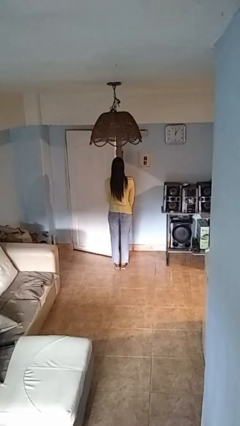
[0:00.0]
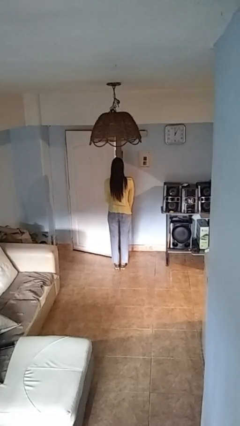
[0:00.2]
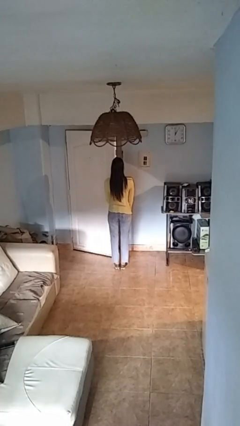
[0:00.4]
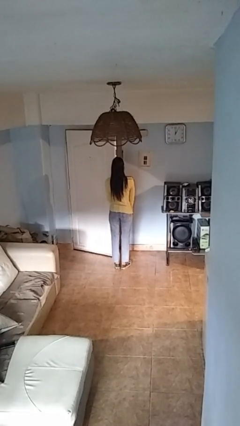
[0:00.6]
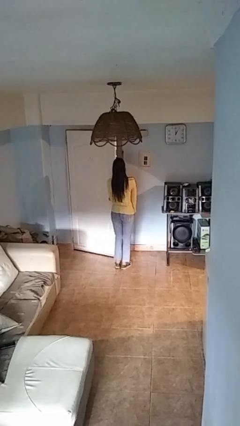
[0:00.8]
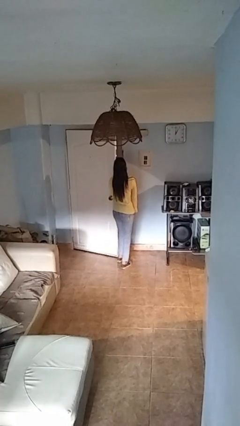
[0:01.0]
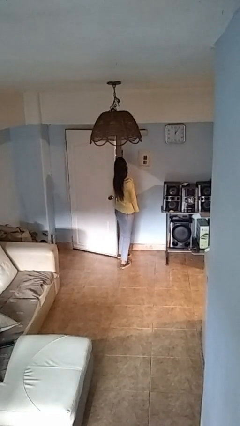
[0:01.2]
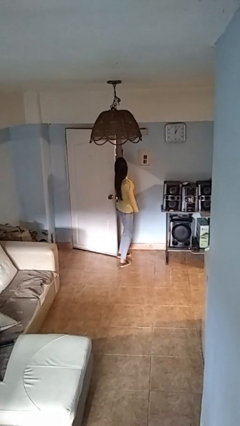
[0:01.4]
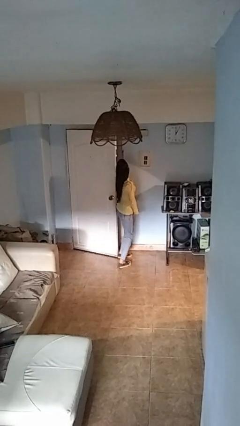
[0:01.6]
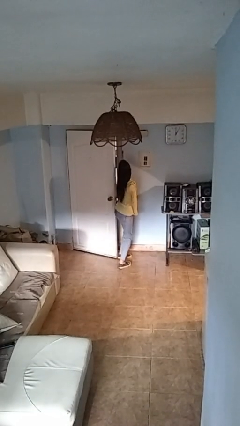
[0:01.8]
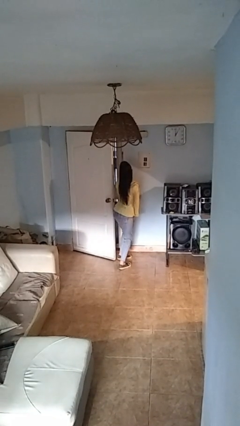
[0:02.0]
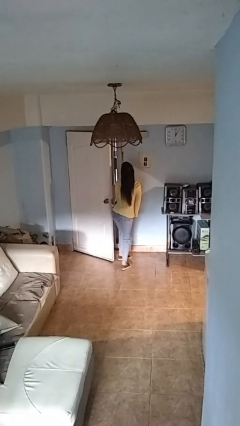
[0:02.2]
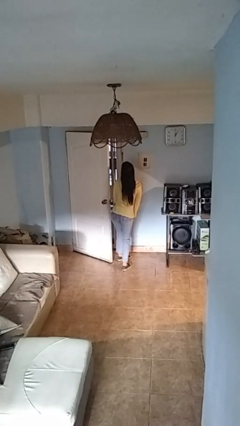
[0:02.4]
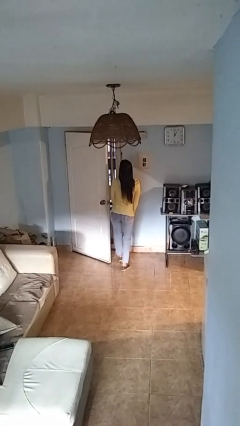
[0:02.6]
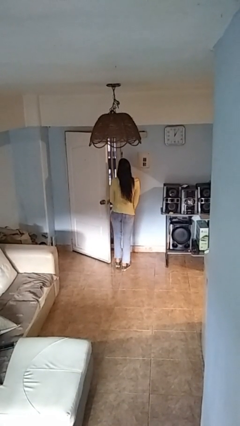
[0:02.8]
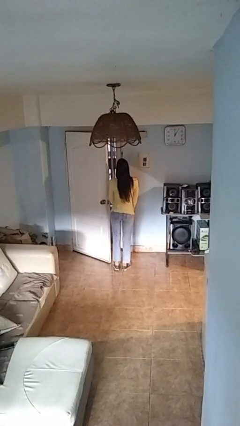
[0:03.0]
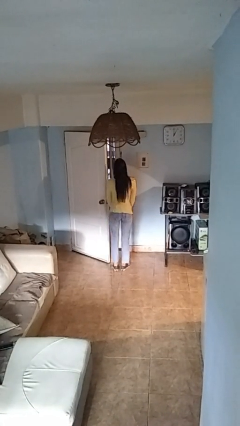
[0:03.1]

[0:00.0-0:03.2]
person opens facility door

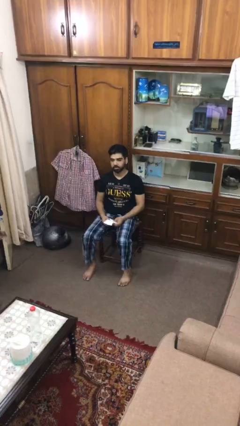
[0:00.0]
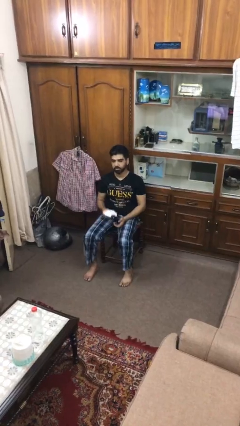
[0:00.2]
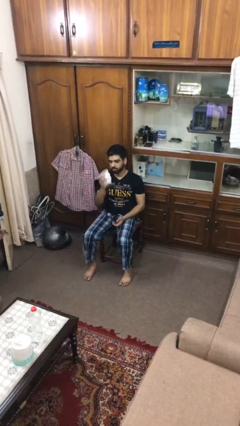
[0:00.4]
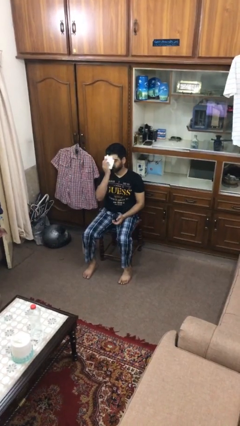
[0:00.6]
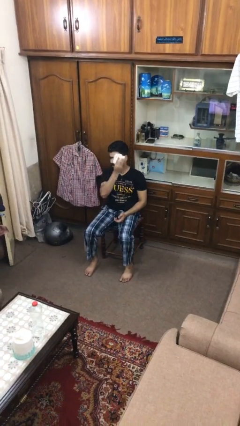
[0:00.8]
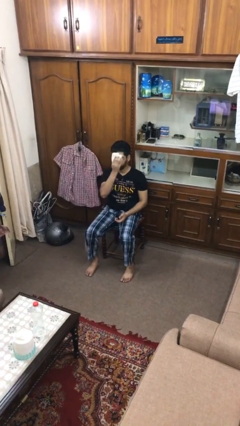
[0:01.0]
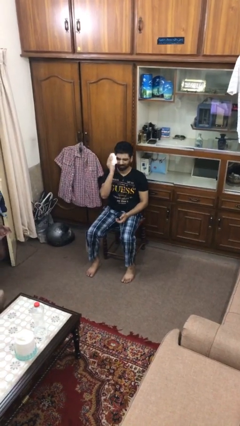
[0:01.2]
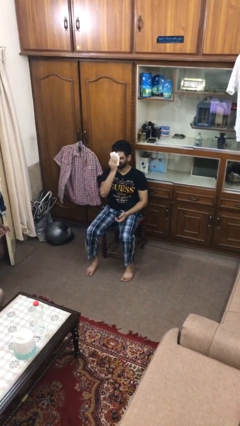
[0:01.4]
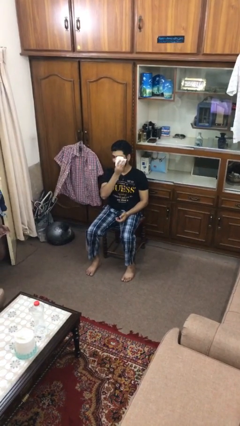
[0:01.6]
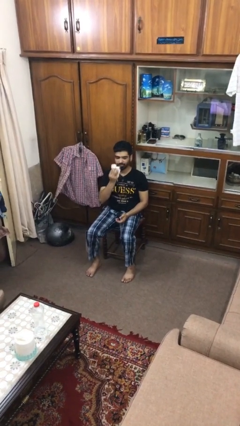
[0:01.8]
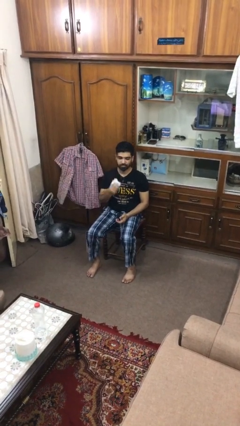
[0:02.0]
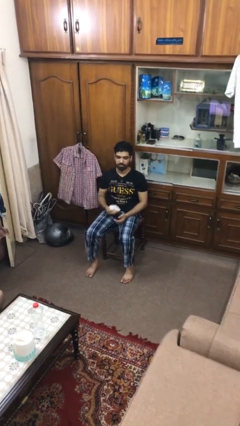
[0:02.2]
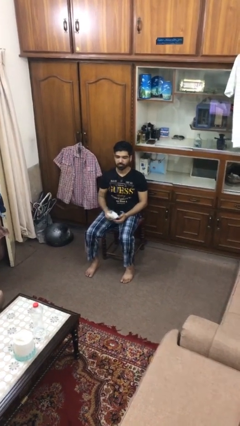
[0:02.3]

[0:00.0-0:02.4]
person wipes mouth with napkin

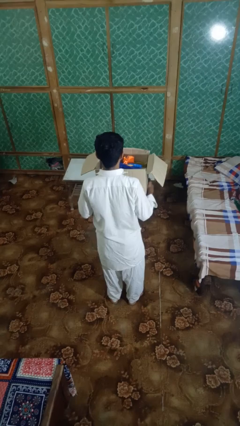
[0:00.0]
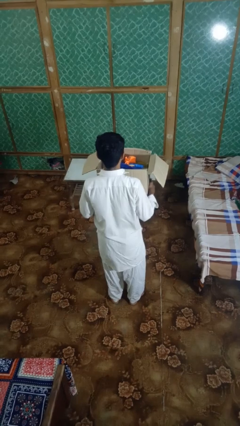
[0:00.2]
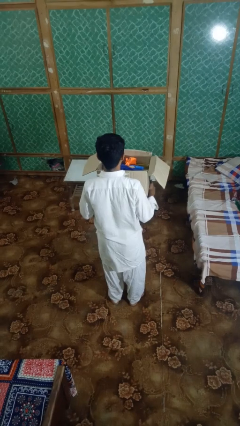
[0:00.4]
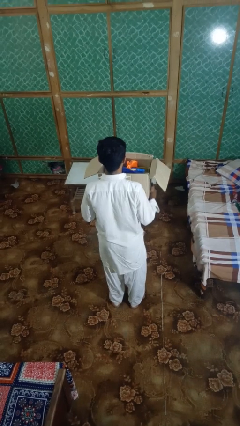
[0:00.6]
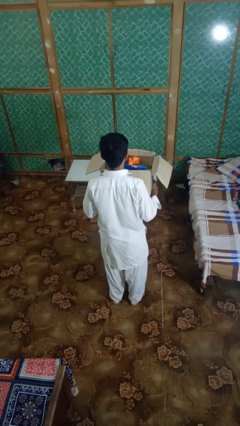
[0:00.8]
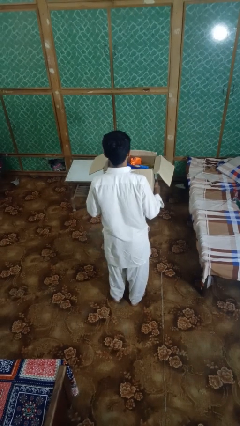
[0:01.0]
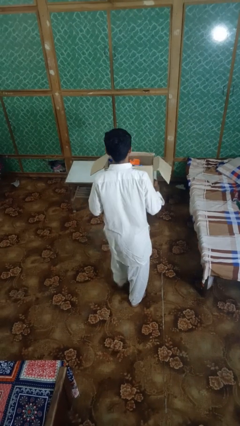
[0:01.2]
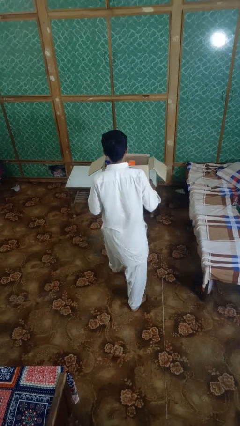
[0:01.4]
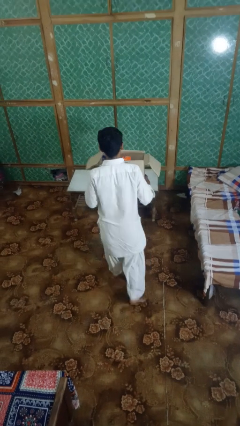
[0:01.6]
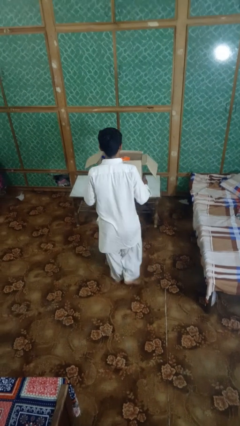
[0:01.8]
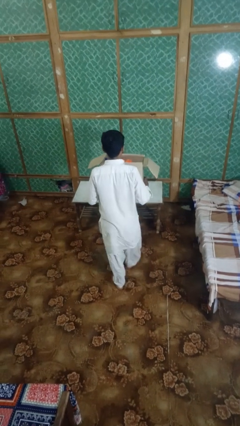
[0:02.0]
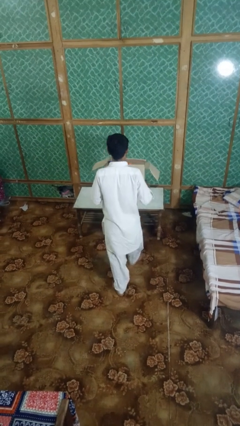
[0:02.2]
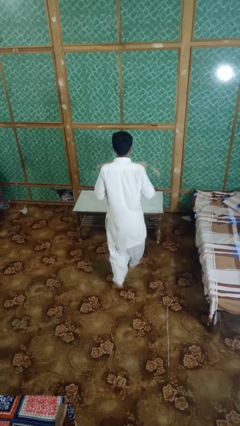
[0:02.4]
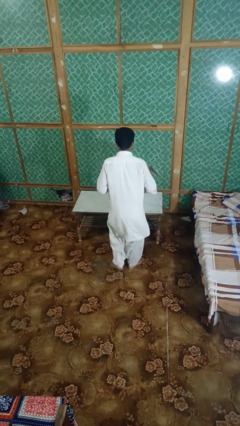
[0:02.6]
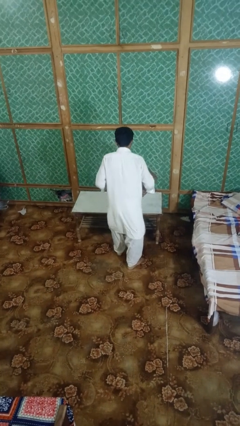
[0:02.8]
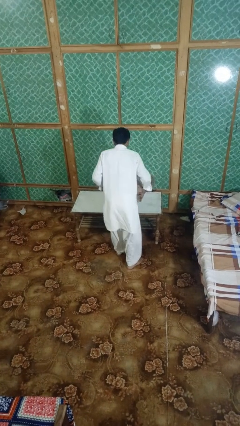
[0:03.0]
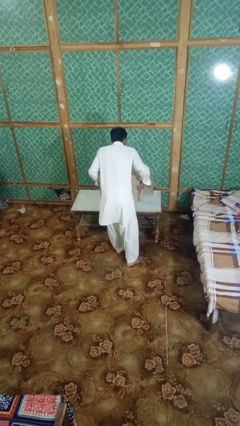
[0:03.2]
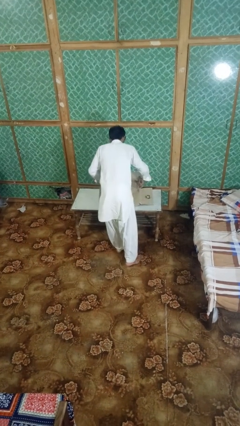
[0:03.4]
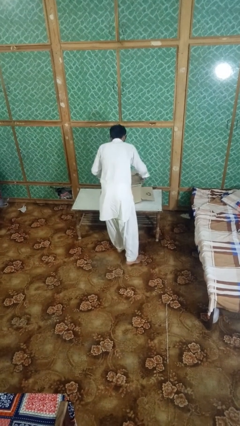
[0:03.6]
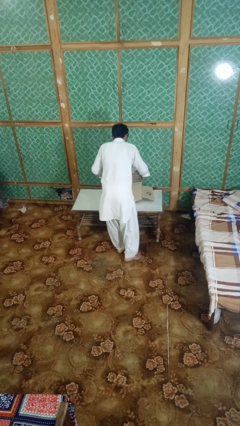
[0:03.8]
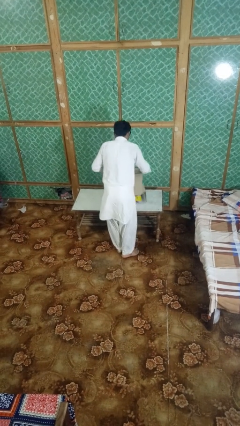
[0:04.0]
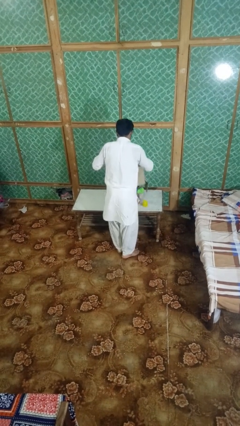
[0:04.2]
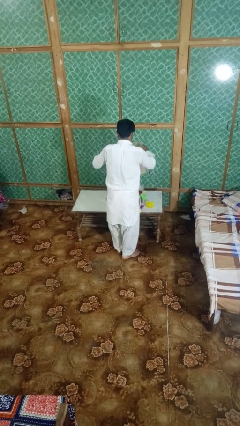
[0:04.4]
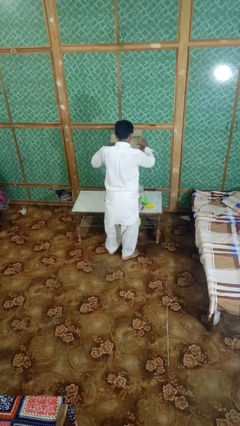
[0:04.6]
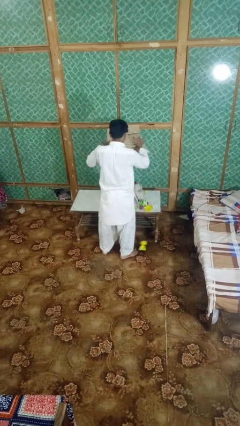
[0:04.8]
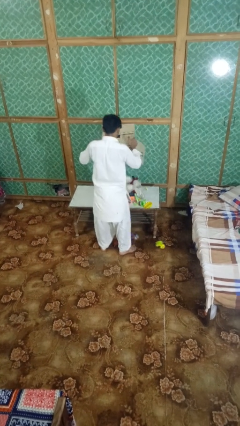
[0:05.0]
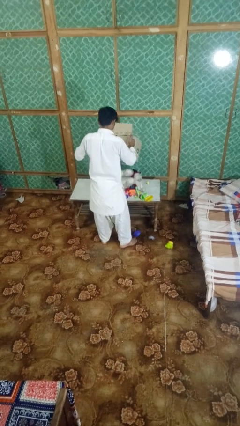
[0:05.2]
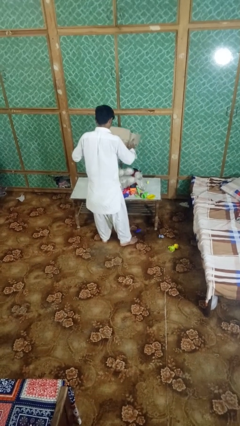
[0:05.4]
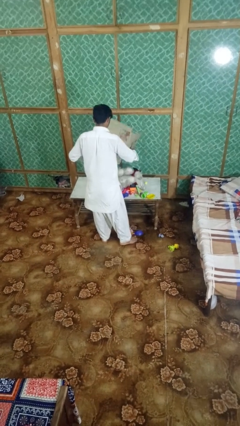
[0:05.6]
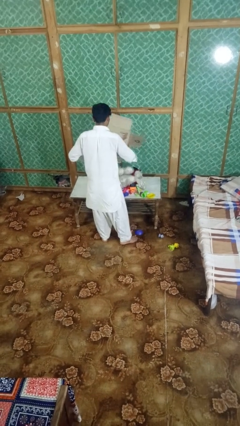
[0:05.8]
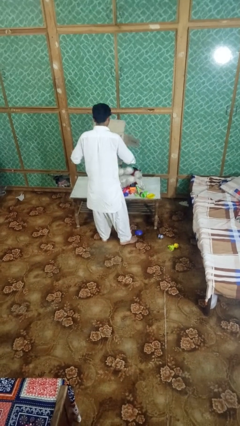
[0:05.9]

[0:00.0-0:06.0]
person unloads box onto table

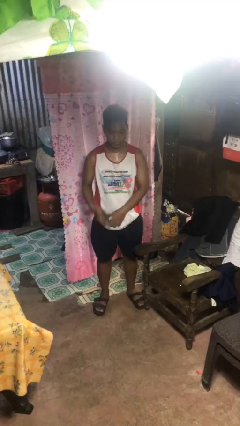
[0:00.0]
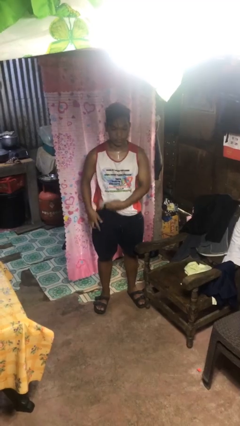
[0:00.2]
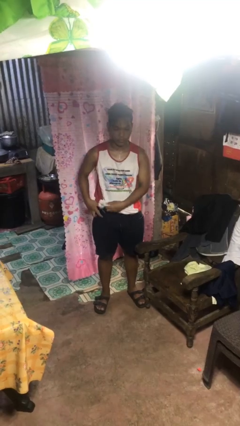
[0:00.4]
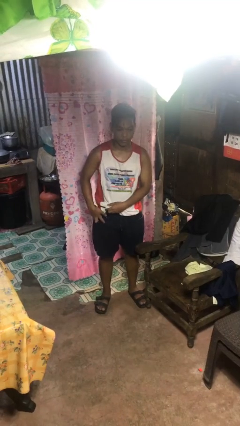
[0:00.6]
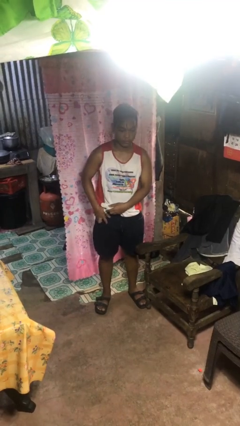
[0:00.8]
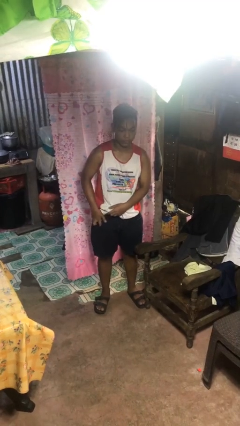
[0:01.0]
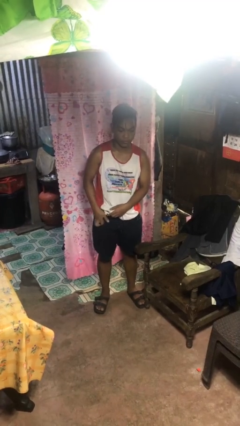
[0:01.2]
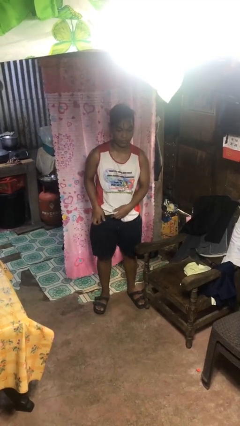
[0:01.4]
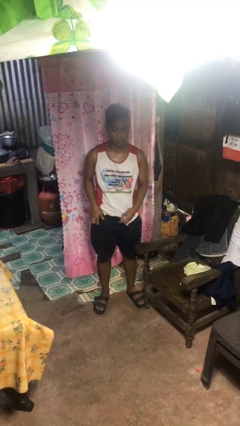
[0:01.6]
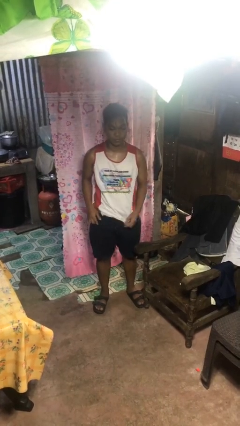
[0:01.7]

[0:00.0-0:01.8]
person puts phone into pocket

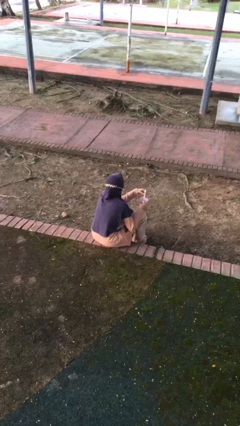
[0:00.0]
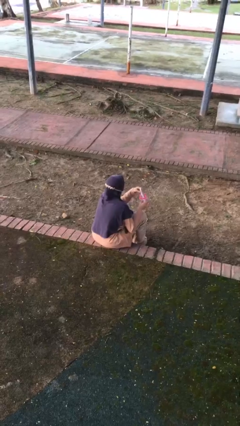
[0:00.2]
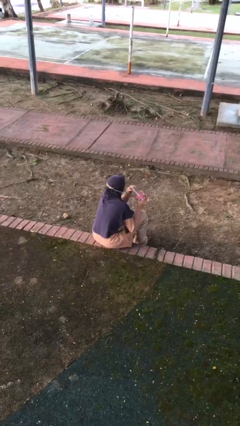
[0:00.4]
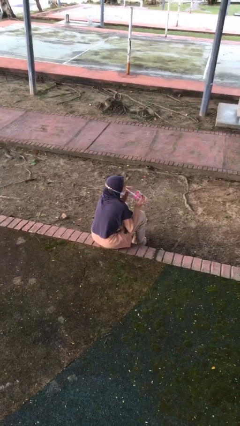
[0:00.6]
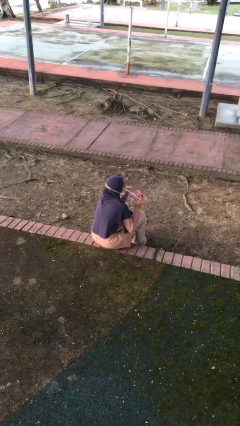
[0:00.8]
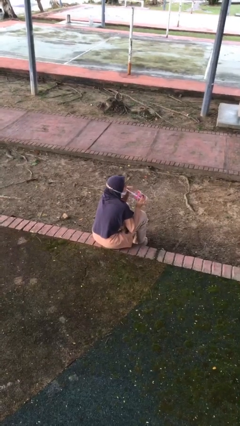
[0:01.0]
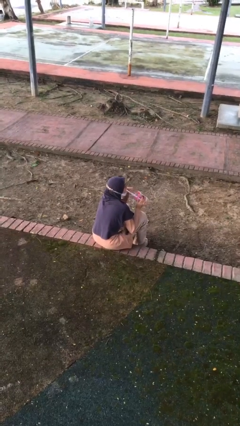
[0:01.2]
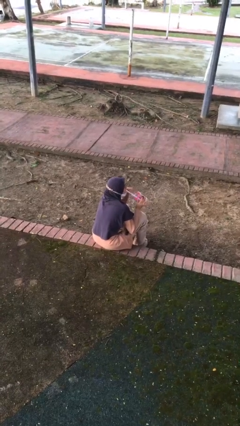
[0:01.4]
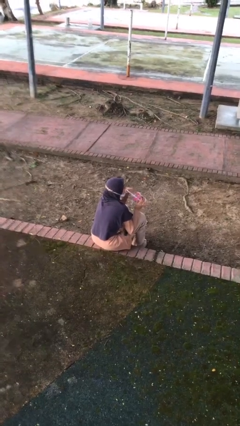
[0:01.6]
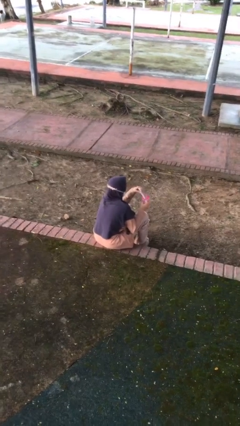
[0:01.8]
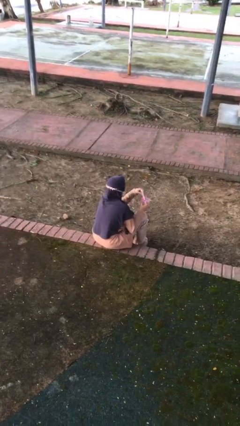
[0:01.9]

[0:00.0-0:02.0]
person drinks from straw

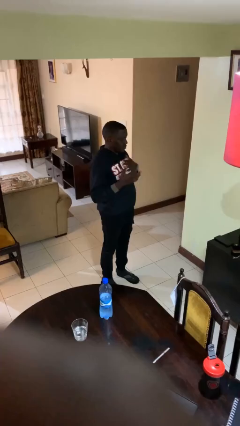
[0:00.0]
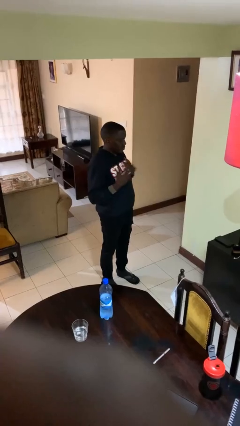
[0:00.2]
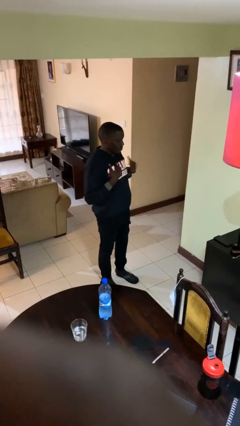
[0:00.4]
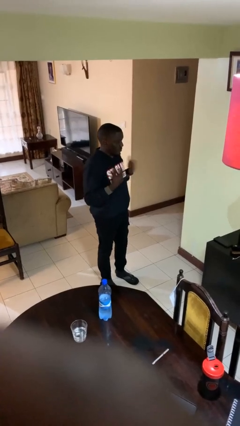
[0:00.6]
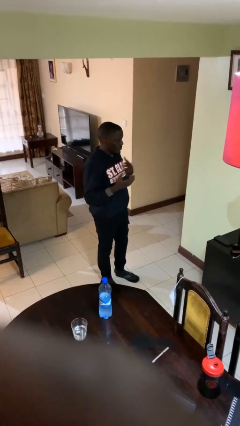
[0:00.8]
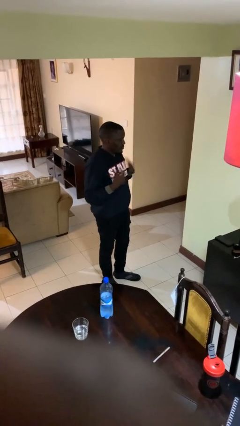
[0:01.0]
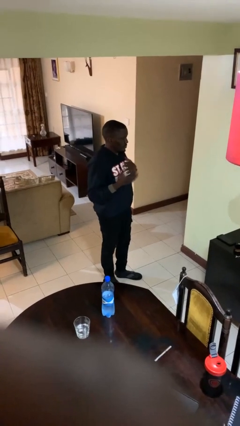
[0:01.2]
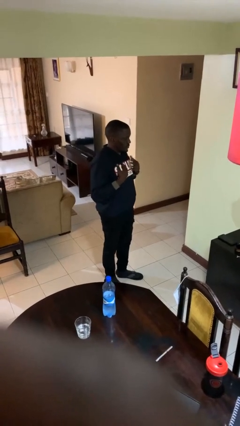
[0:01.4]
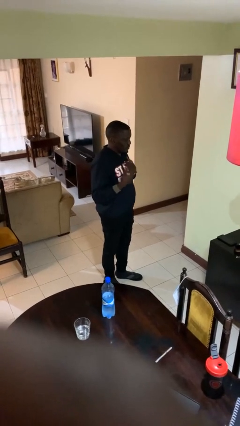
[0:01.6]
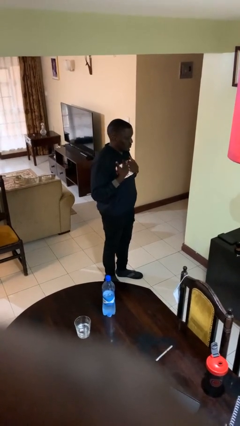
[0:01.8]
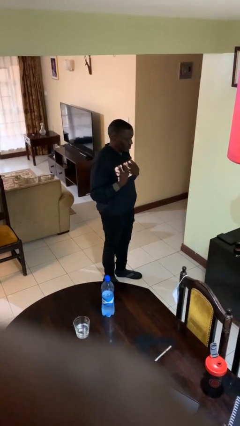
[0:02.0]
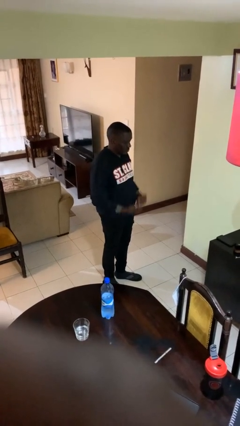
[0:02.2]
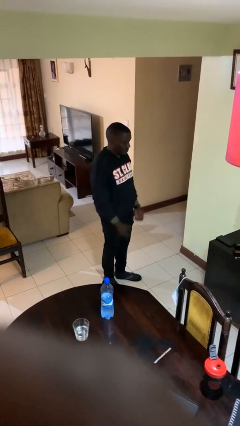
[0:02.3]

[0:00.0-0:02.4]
person drums on chest
